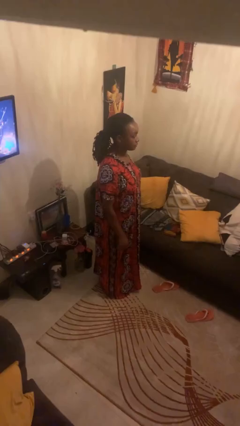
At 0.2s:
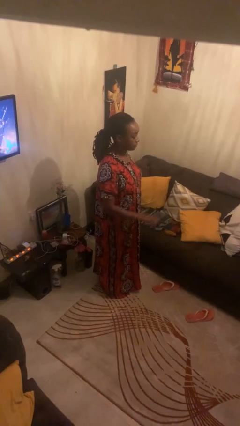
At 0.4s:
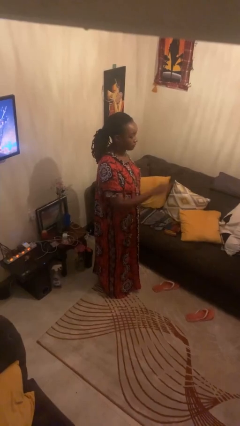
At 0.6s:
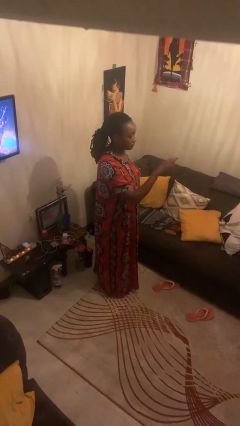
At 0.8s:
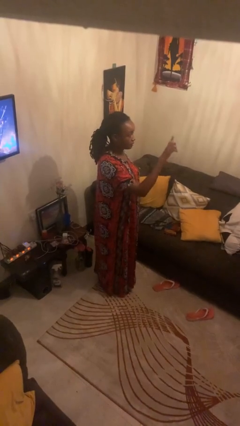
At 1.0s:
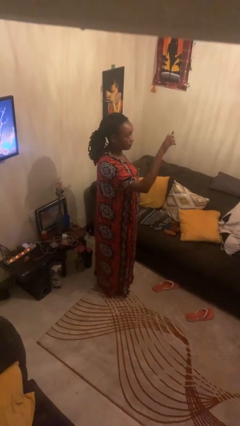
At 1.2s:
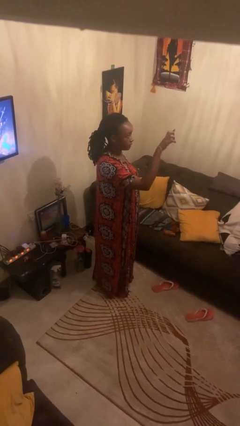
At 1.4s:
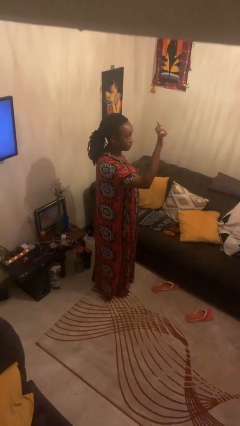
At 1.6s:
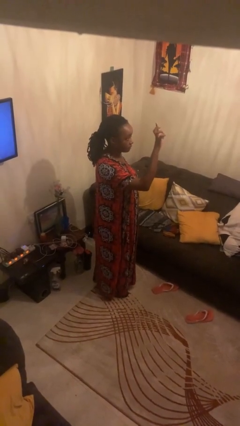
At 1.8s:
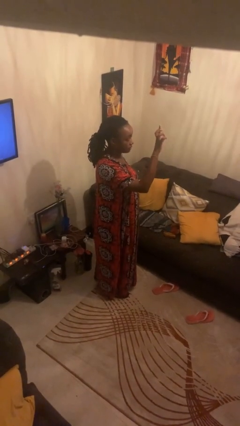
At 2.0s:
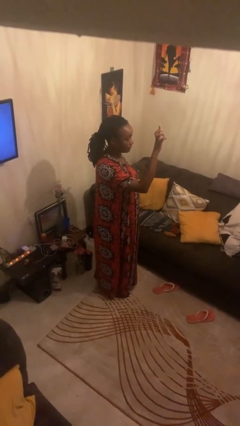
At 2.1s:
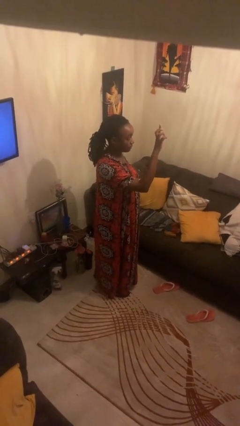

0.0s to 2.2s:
person gestures swipe up

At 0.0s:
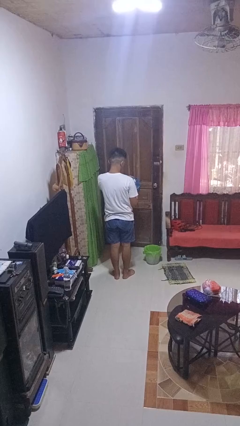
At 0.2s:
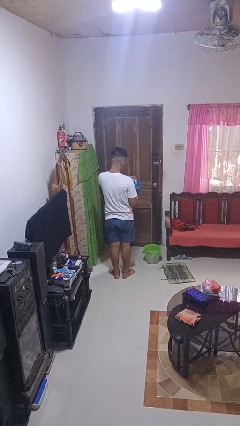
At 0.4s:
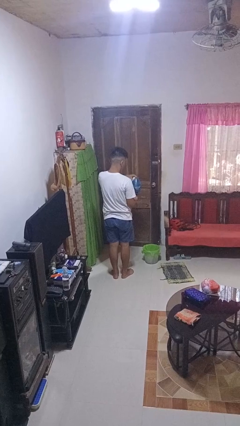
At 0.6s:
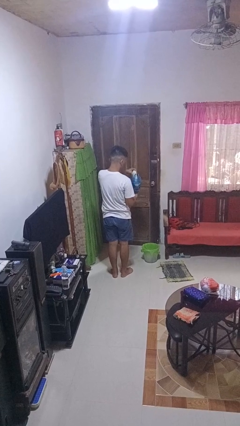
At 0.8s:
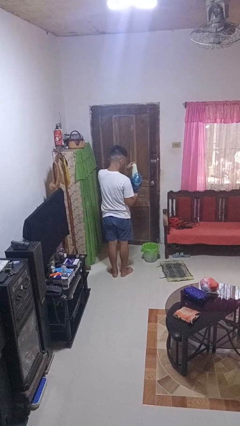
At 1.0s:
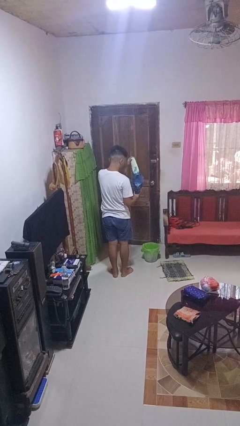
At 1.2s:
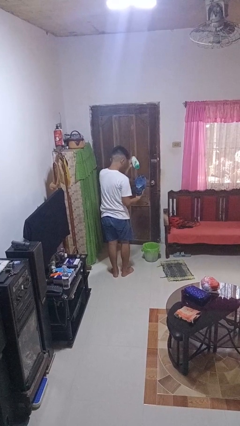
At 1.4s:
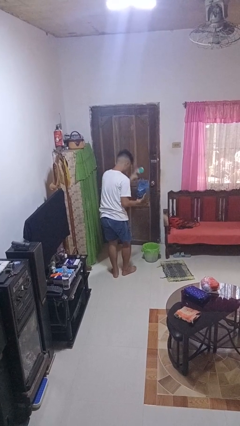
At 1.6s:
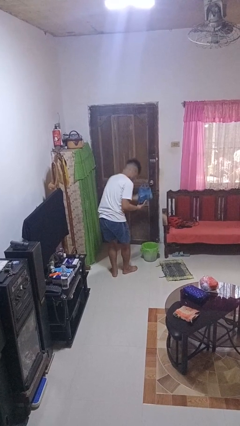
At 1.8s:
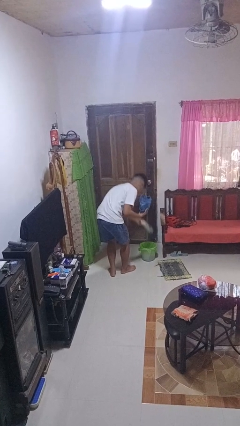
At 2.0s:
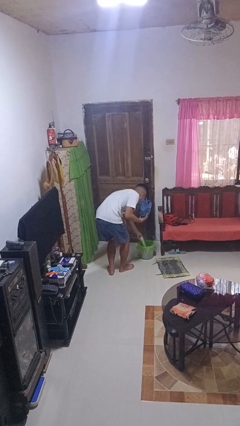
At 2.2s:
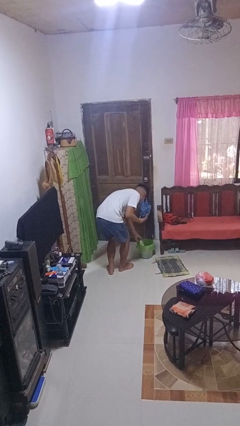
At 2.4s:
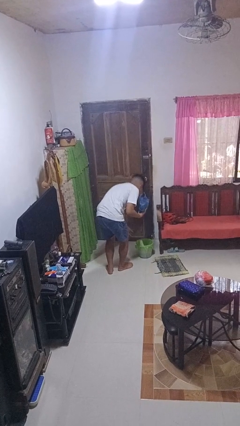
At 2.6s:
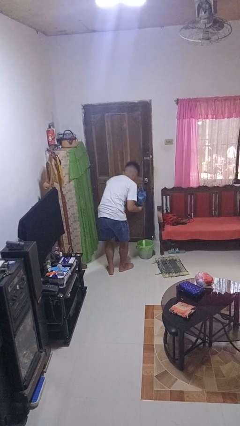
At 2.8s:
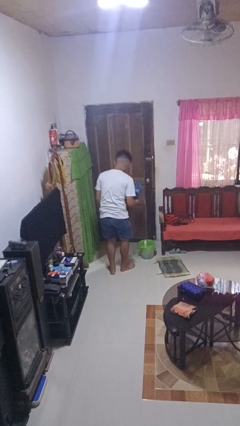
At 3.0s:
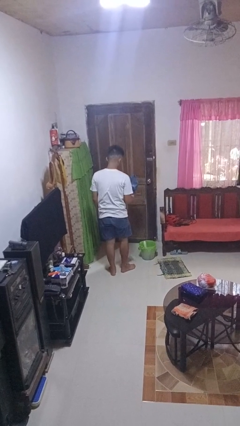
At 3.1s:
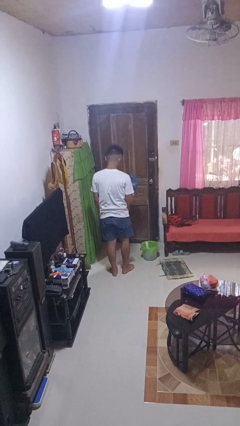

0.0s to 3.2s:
person discards trash

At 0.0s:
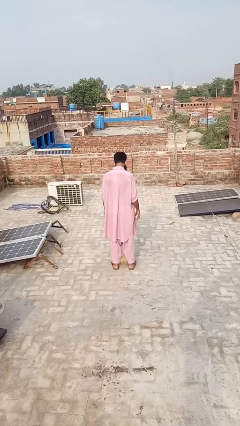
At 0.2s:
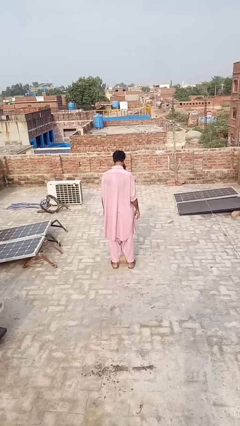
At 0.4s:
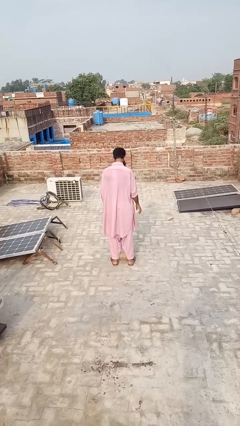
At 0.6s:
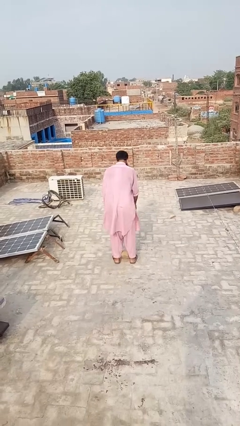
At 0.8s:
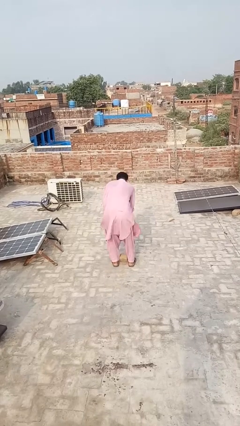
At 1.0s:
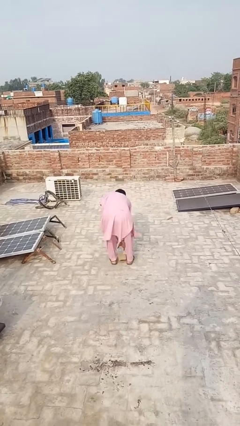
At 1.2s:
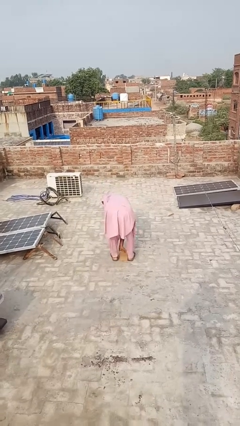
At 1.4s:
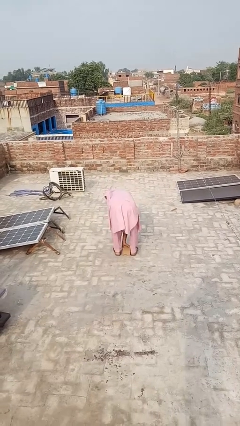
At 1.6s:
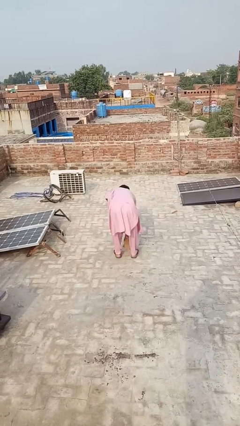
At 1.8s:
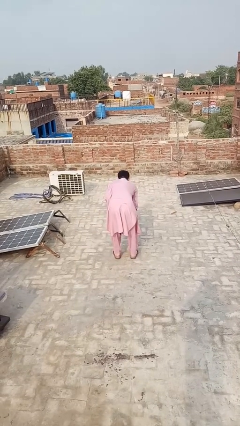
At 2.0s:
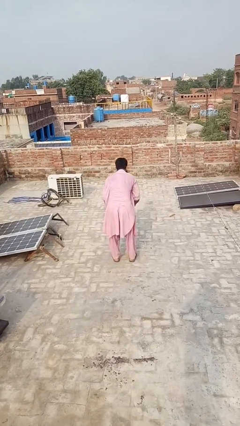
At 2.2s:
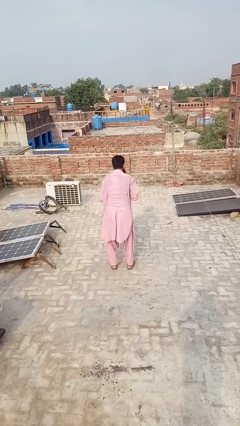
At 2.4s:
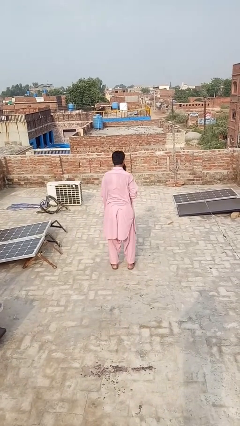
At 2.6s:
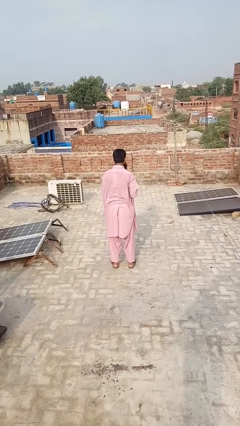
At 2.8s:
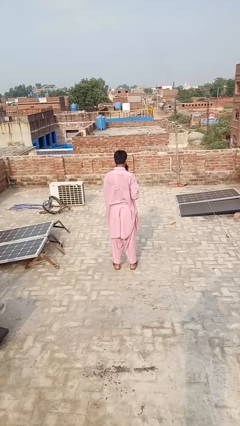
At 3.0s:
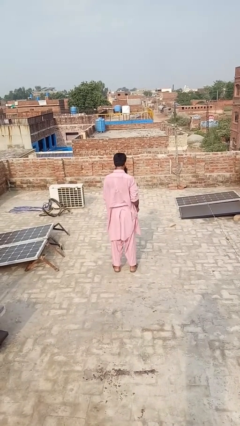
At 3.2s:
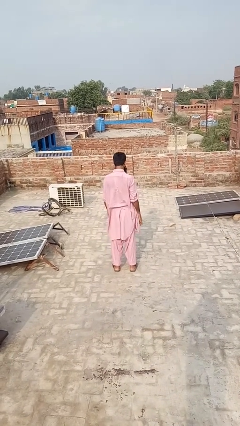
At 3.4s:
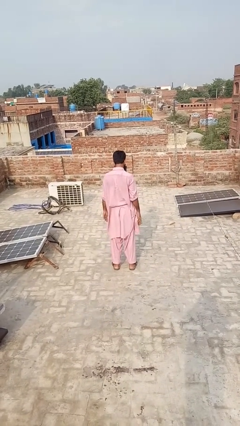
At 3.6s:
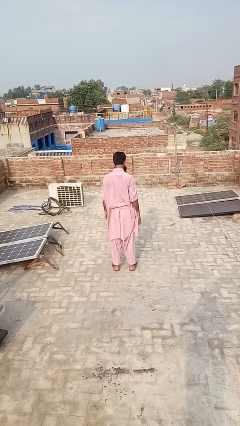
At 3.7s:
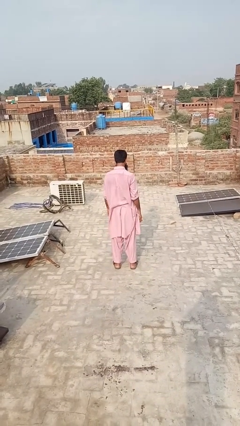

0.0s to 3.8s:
person picks up object from floor

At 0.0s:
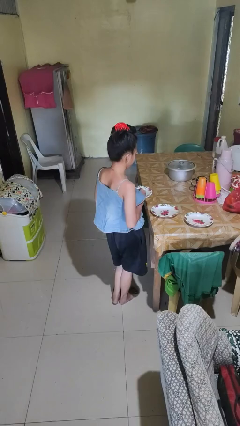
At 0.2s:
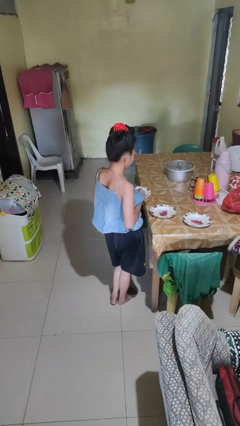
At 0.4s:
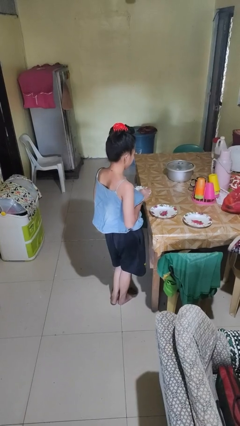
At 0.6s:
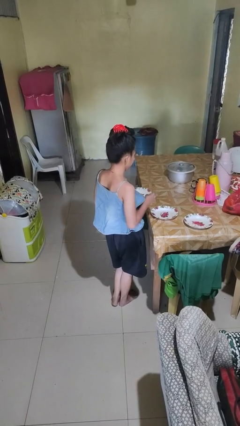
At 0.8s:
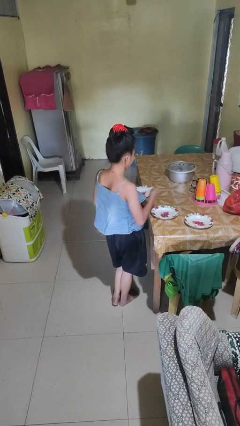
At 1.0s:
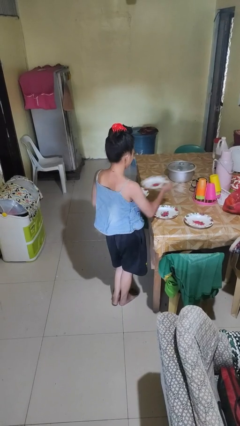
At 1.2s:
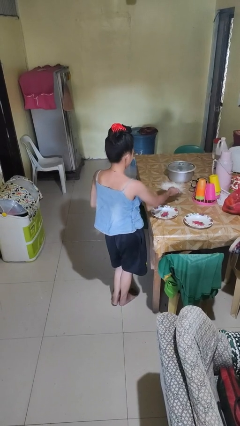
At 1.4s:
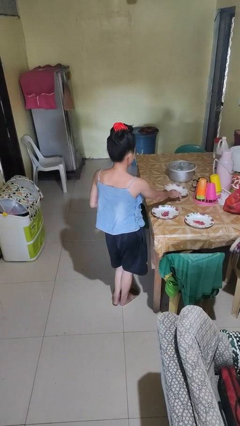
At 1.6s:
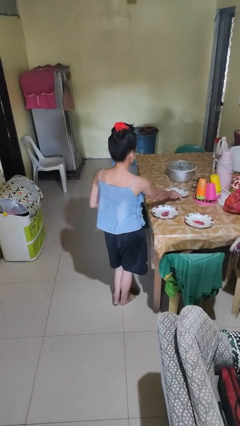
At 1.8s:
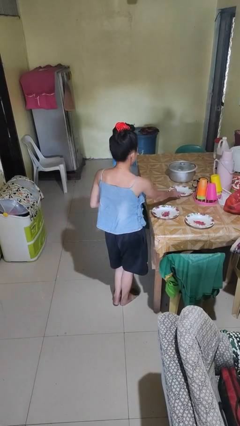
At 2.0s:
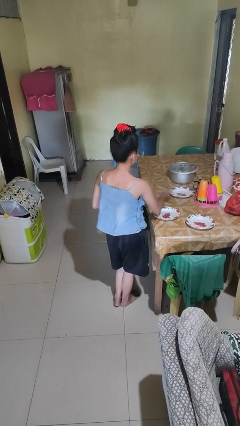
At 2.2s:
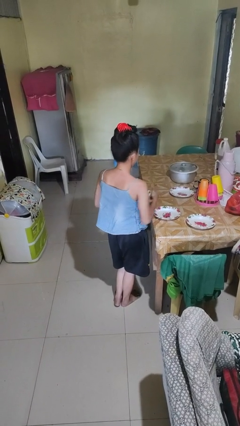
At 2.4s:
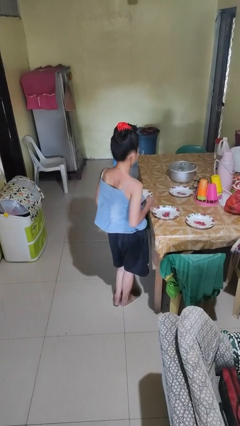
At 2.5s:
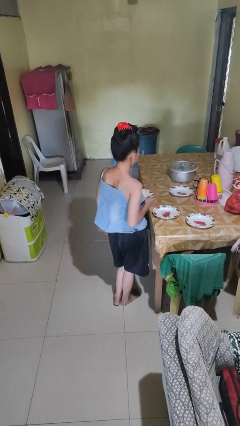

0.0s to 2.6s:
person sets table

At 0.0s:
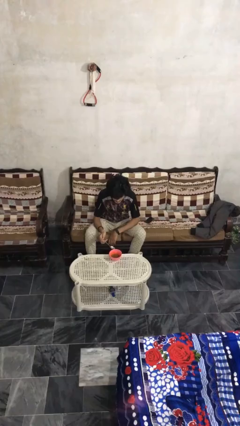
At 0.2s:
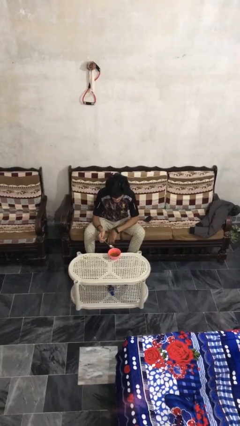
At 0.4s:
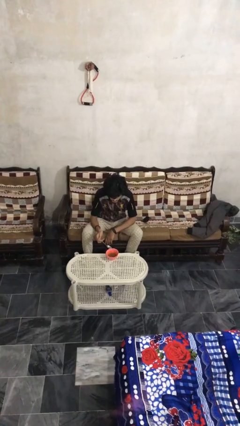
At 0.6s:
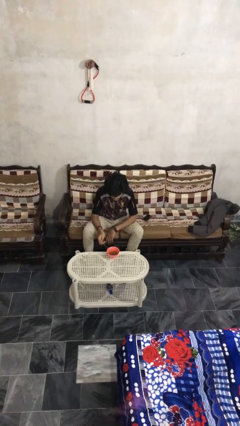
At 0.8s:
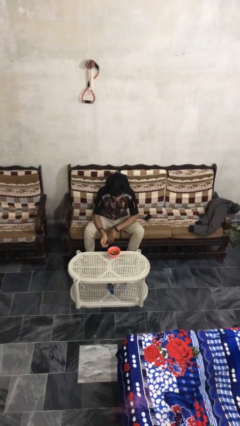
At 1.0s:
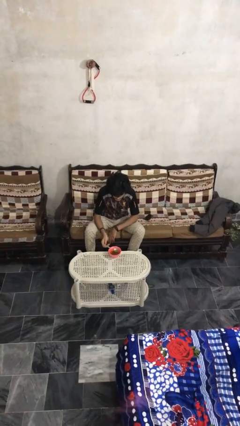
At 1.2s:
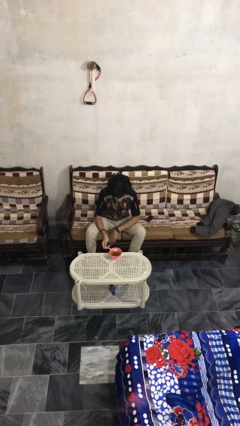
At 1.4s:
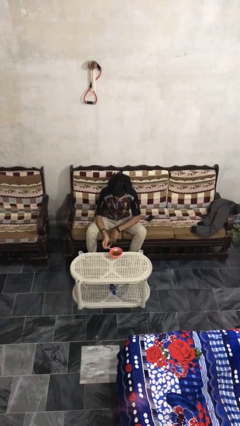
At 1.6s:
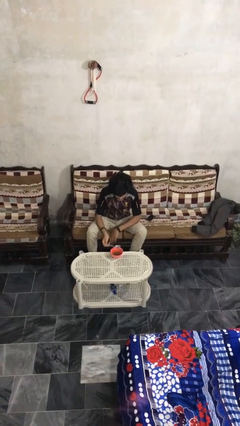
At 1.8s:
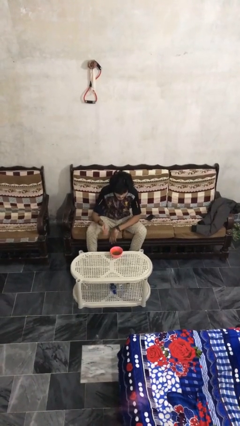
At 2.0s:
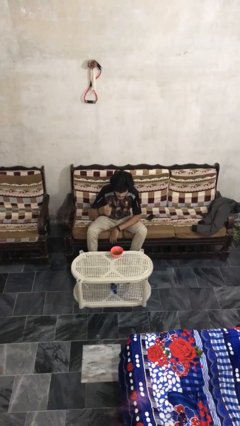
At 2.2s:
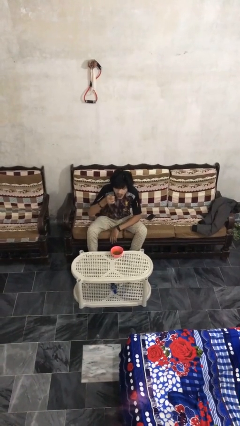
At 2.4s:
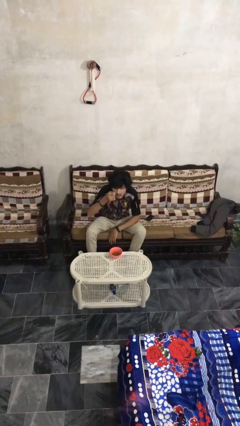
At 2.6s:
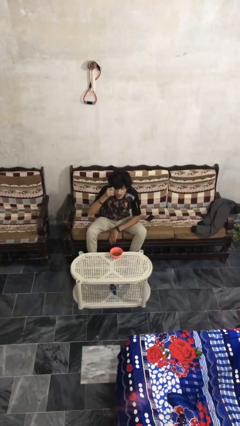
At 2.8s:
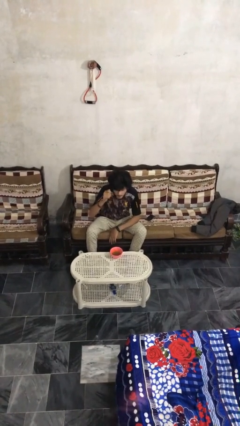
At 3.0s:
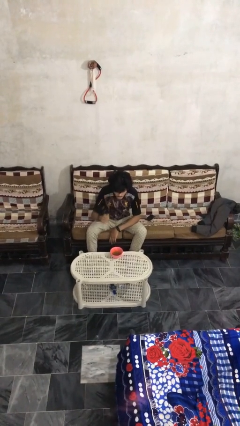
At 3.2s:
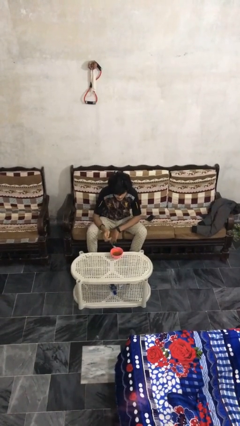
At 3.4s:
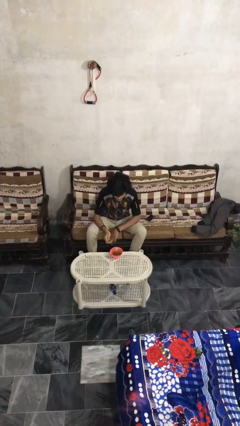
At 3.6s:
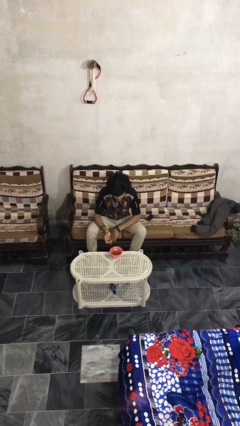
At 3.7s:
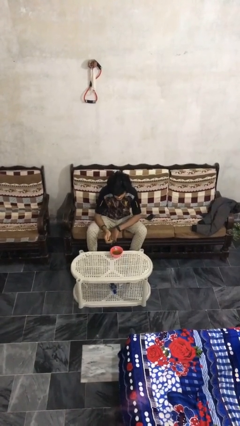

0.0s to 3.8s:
person eats with utensil

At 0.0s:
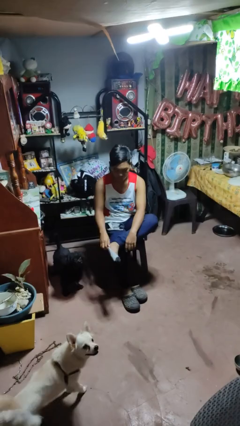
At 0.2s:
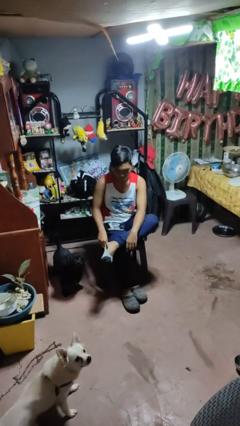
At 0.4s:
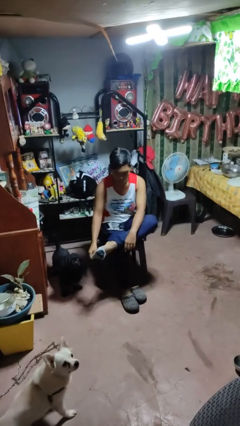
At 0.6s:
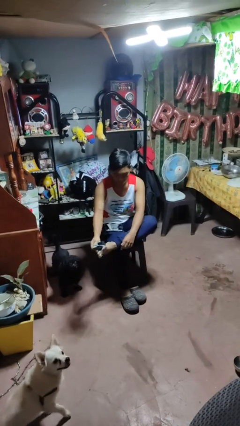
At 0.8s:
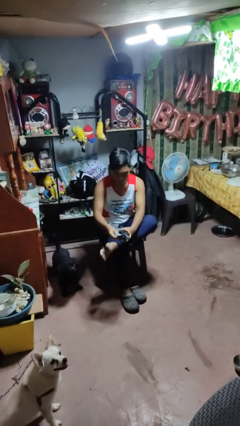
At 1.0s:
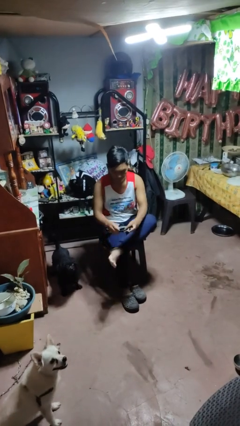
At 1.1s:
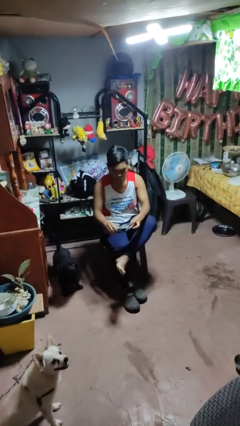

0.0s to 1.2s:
person takes off socks

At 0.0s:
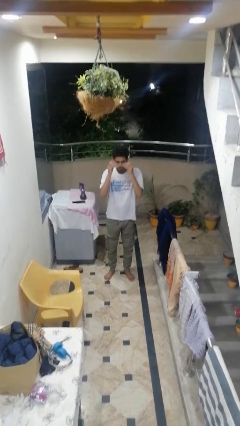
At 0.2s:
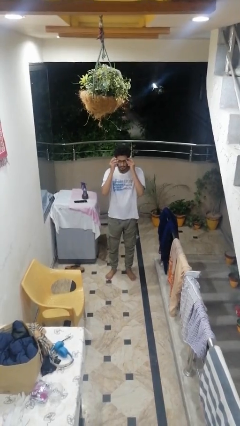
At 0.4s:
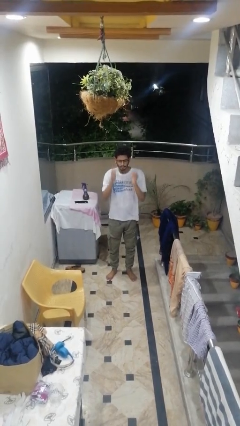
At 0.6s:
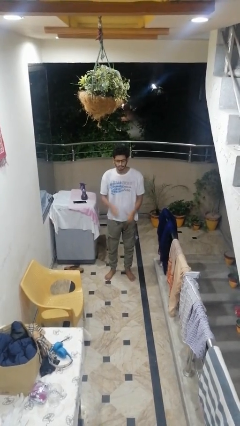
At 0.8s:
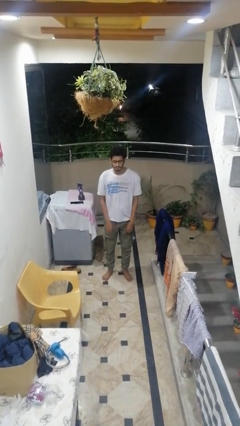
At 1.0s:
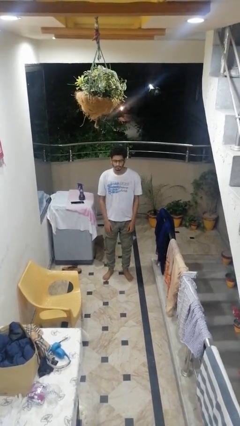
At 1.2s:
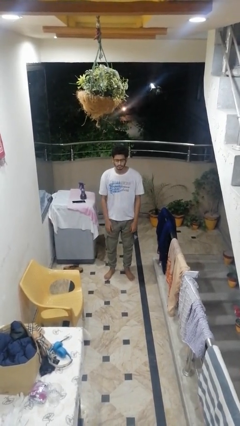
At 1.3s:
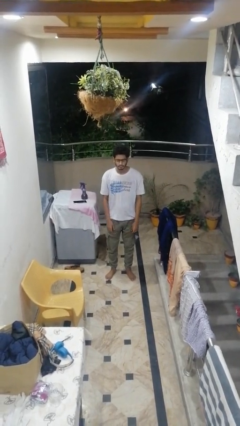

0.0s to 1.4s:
person puts on glasses
